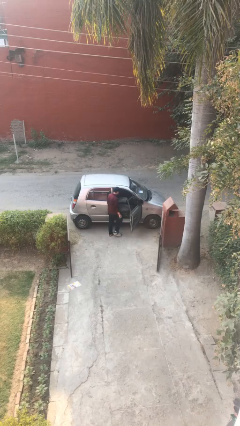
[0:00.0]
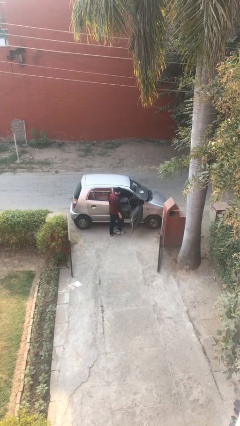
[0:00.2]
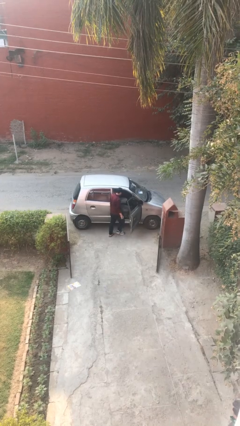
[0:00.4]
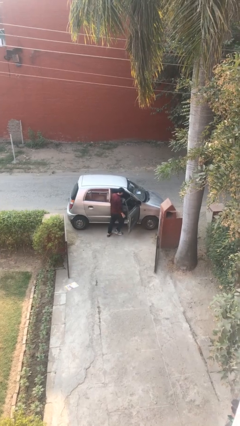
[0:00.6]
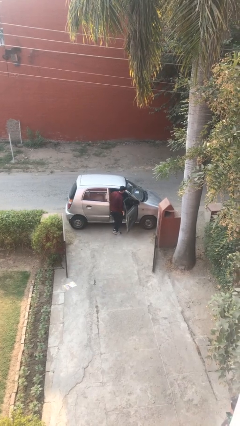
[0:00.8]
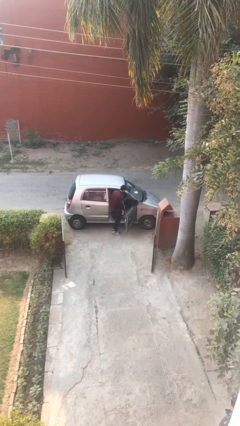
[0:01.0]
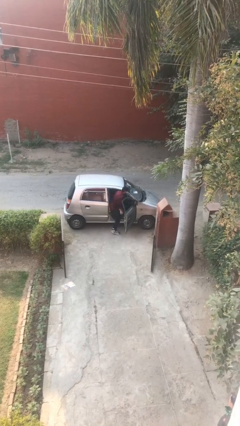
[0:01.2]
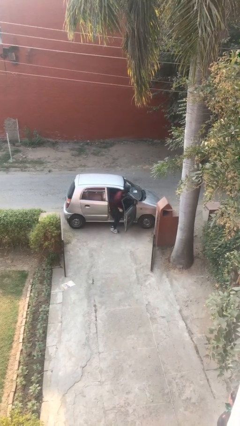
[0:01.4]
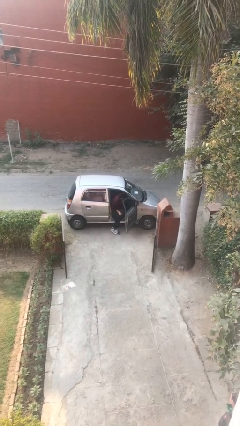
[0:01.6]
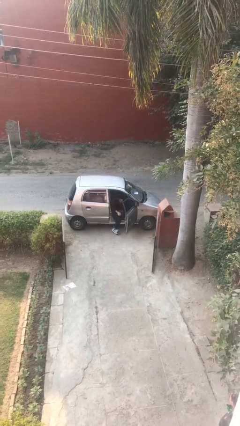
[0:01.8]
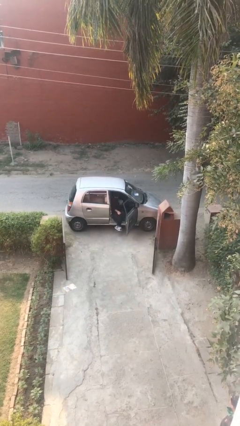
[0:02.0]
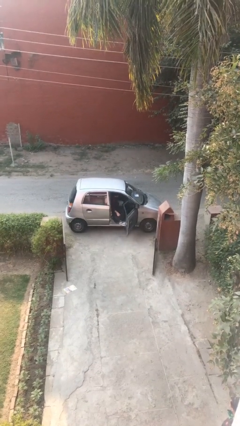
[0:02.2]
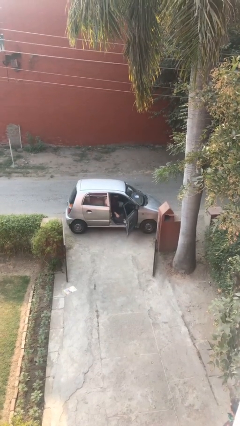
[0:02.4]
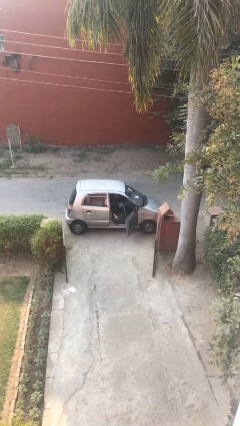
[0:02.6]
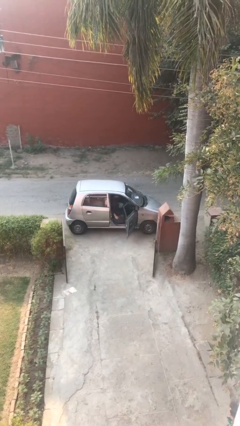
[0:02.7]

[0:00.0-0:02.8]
person enters car

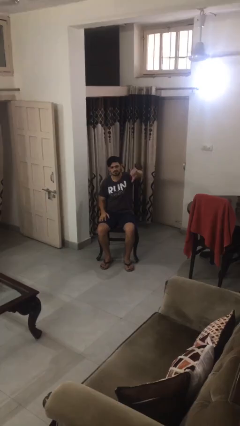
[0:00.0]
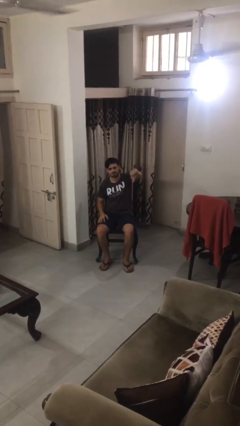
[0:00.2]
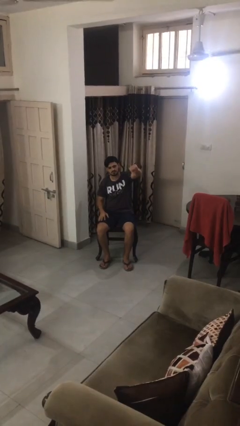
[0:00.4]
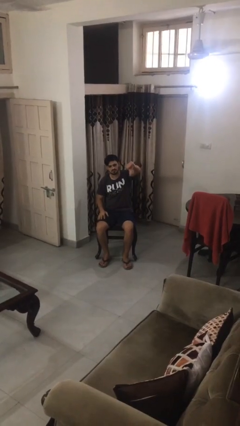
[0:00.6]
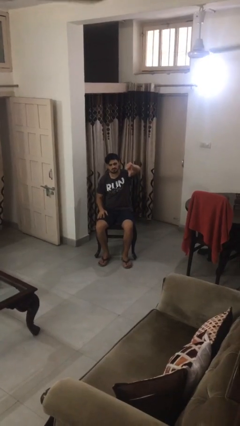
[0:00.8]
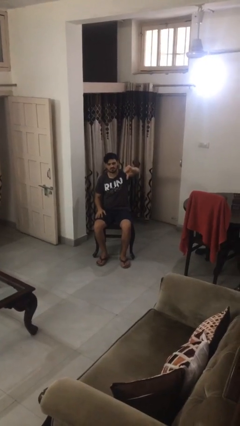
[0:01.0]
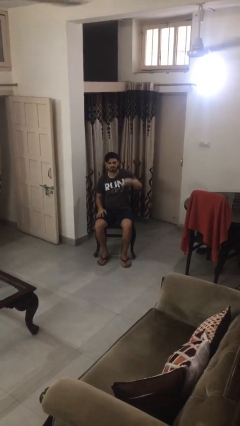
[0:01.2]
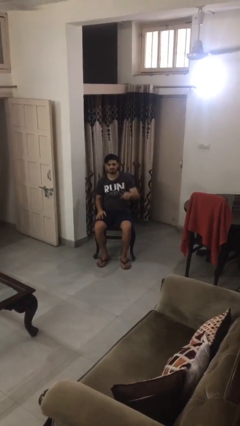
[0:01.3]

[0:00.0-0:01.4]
person gestures thumbs down

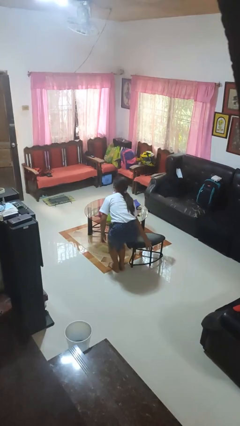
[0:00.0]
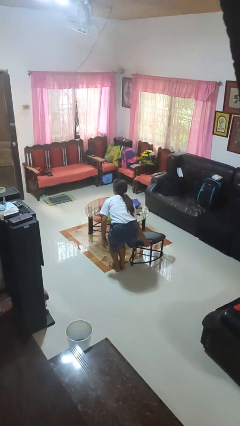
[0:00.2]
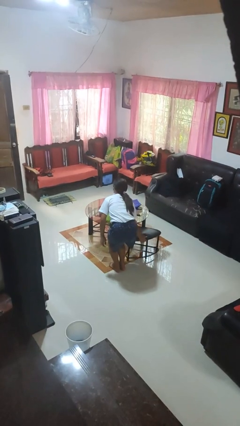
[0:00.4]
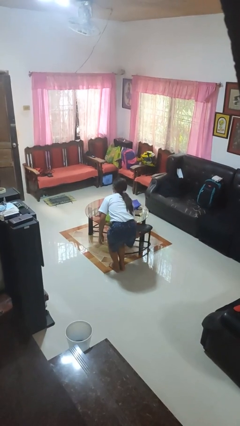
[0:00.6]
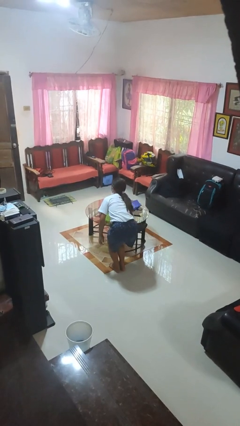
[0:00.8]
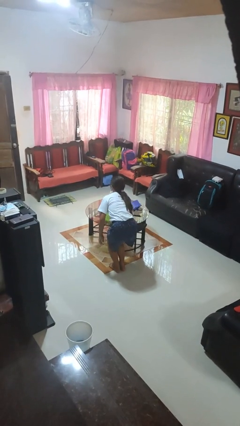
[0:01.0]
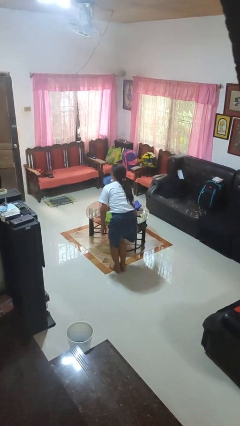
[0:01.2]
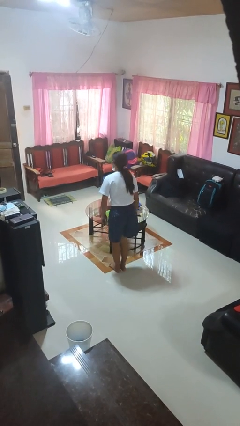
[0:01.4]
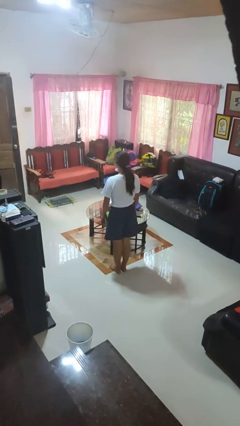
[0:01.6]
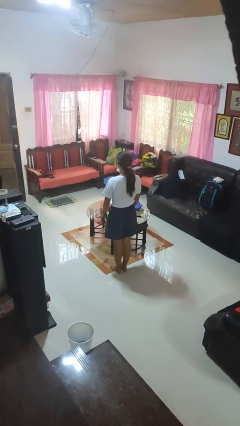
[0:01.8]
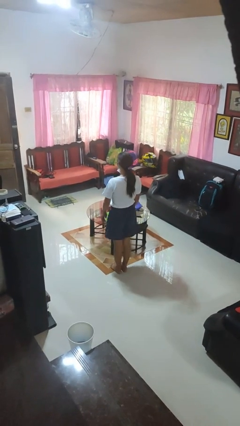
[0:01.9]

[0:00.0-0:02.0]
person pushes in chair

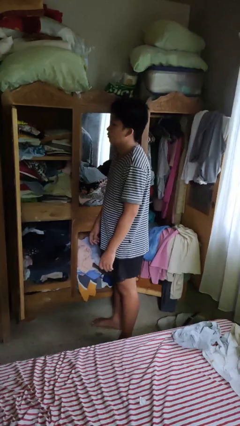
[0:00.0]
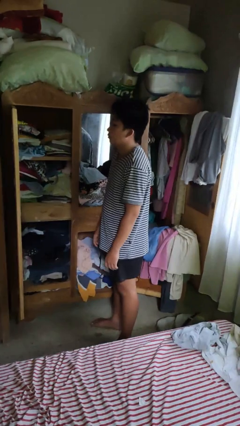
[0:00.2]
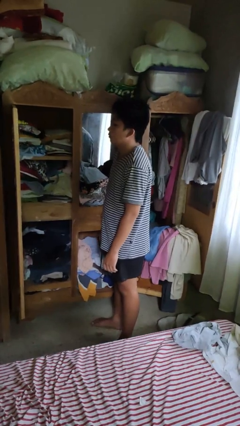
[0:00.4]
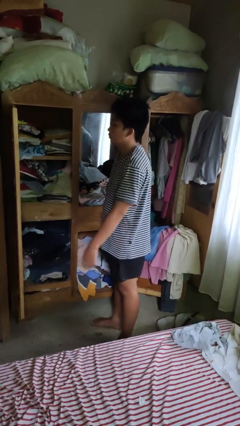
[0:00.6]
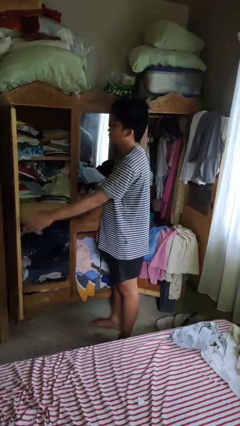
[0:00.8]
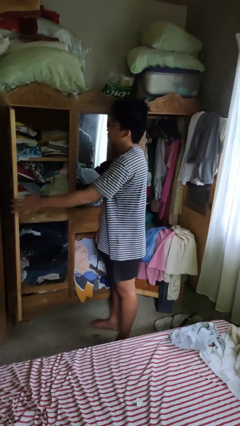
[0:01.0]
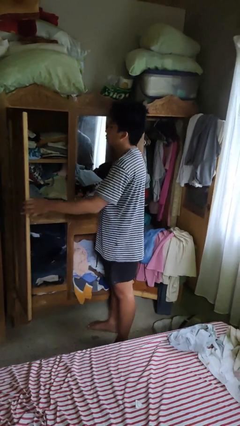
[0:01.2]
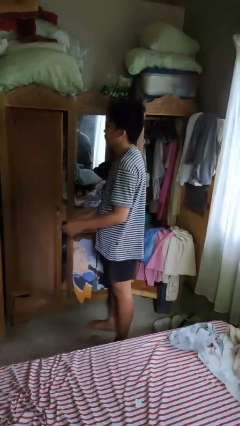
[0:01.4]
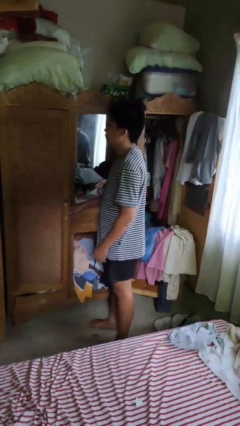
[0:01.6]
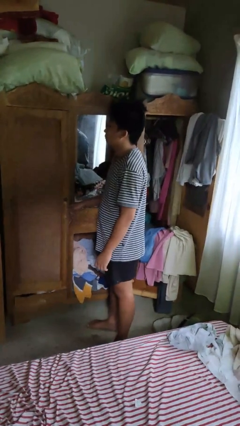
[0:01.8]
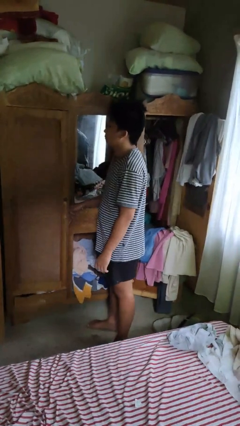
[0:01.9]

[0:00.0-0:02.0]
person closes dresser drawer

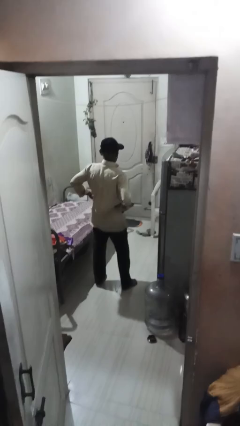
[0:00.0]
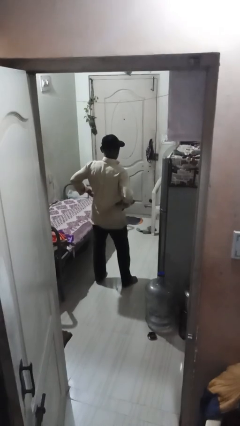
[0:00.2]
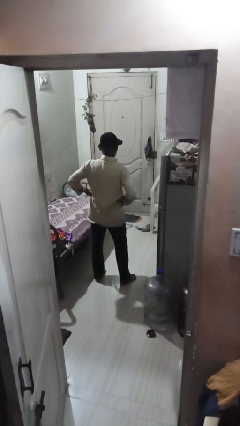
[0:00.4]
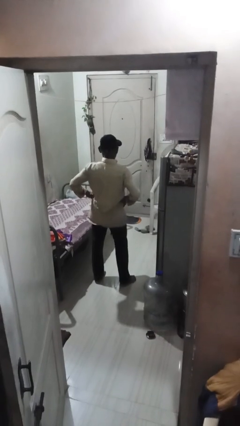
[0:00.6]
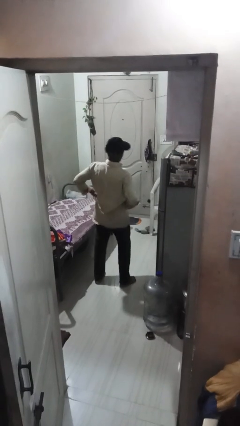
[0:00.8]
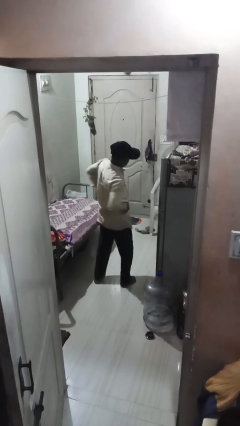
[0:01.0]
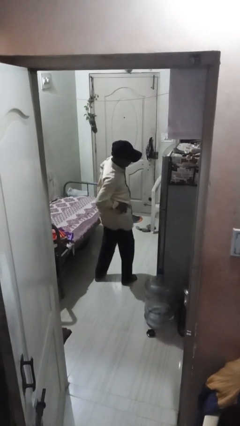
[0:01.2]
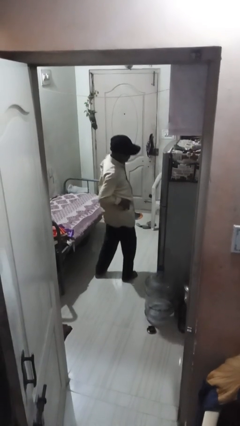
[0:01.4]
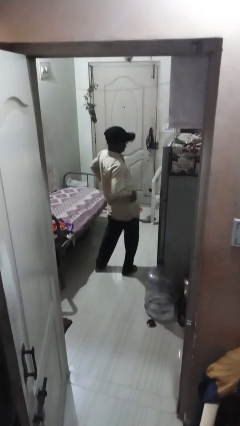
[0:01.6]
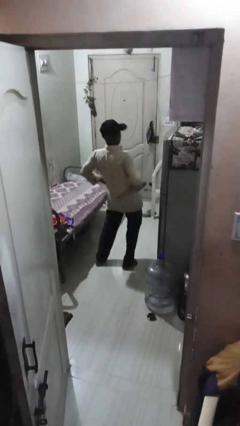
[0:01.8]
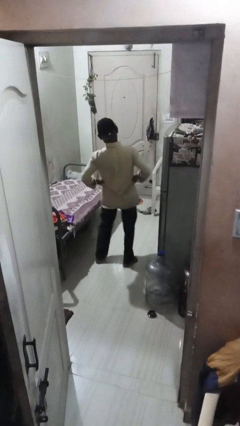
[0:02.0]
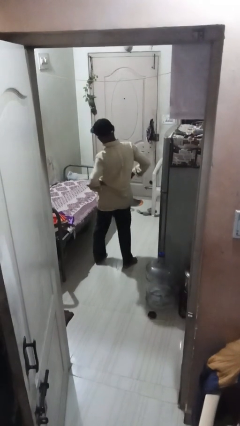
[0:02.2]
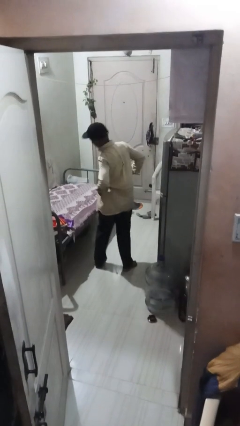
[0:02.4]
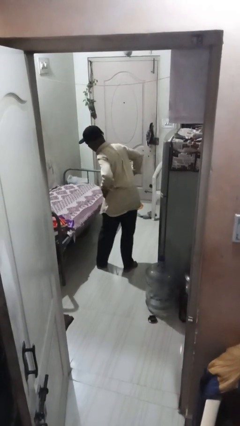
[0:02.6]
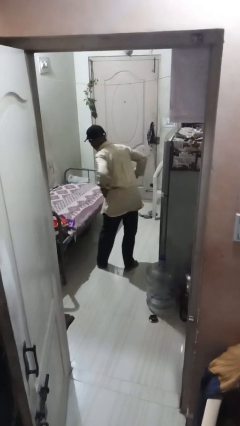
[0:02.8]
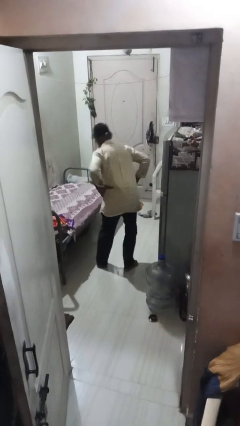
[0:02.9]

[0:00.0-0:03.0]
person wiggles hips

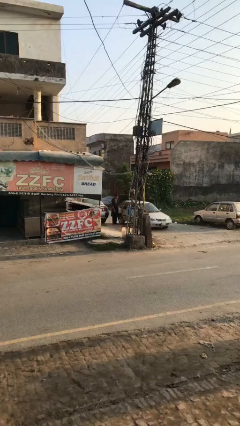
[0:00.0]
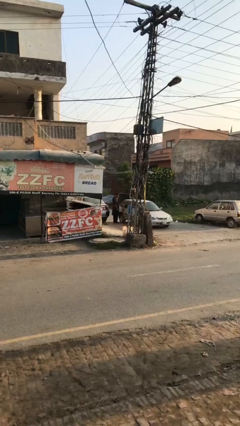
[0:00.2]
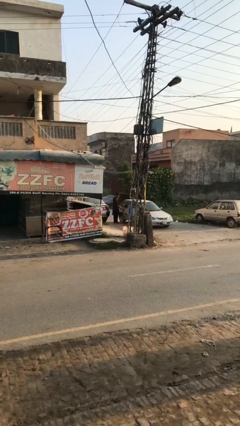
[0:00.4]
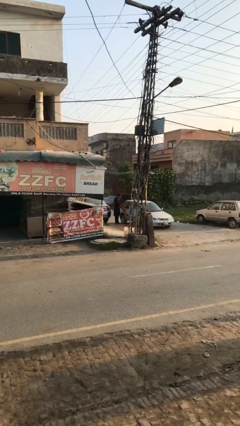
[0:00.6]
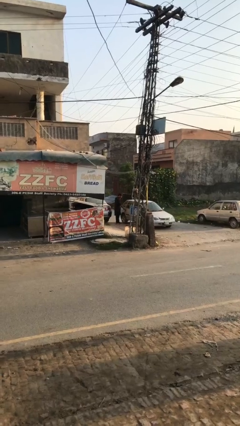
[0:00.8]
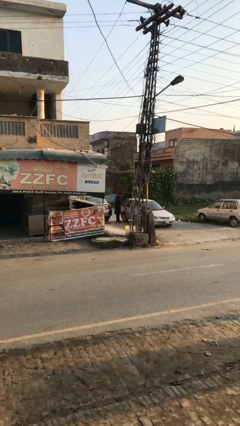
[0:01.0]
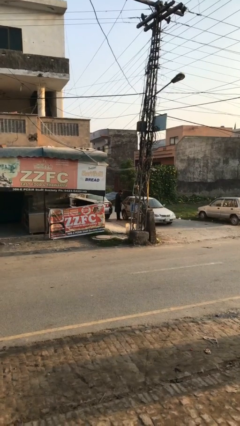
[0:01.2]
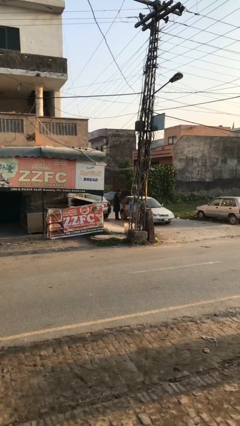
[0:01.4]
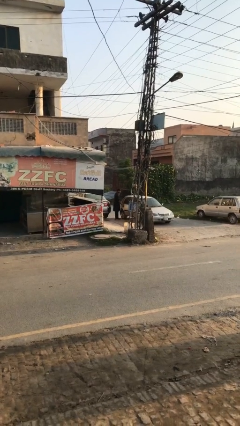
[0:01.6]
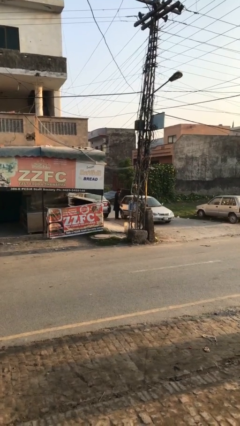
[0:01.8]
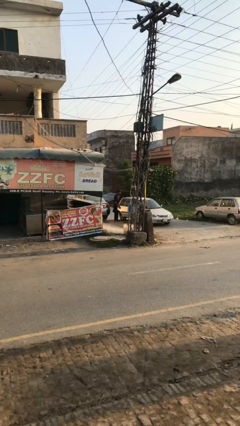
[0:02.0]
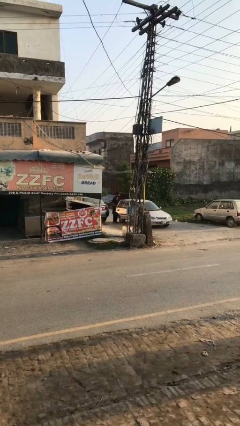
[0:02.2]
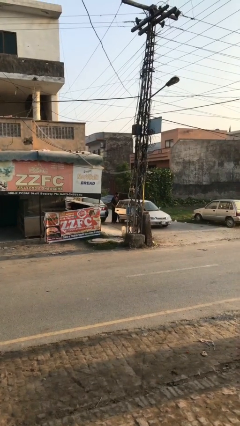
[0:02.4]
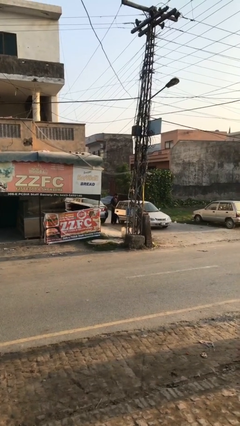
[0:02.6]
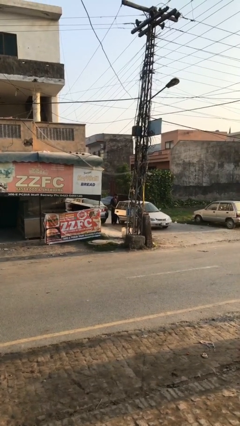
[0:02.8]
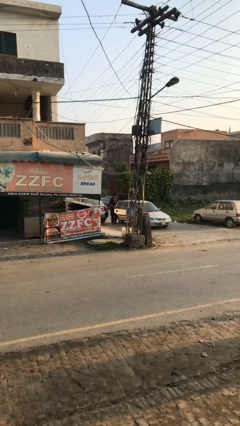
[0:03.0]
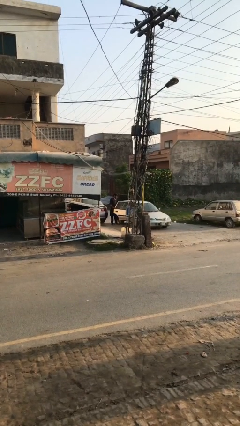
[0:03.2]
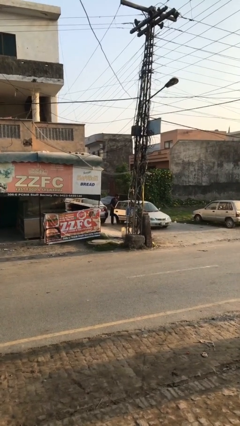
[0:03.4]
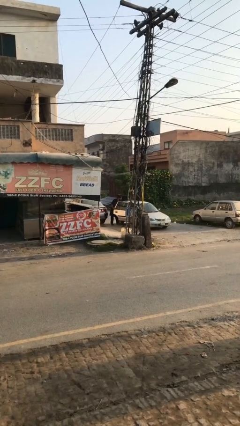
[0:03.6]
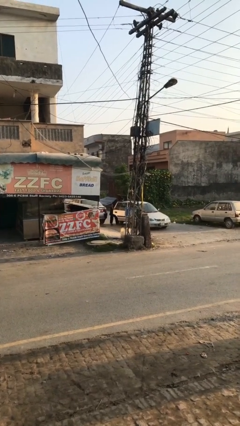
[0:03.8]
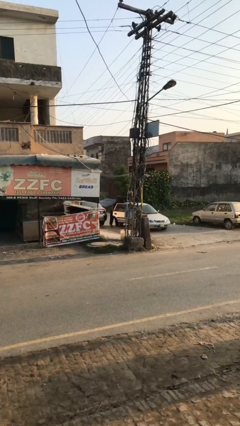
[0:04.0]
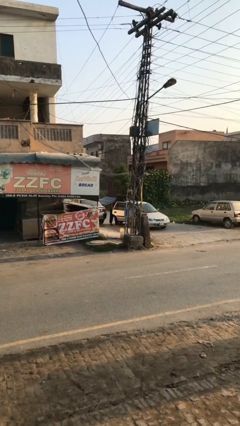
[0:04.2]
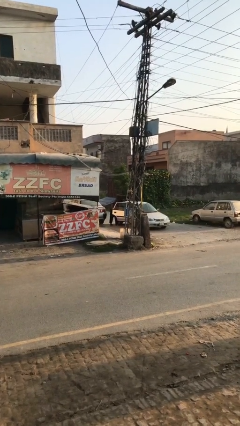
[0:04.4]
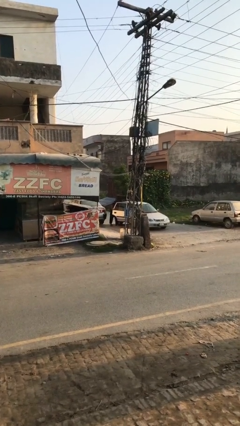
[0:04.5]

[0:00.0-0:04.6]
person opens car door

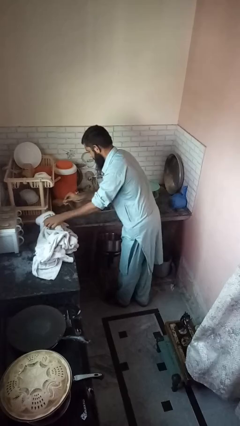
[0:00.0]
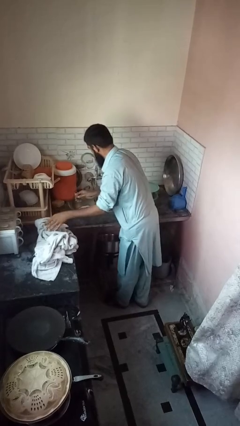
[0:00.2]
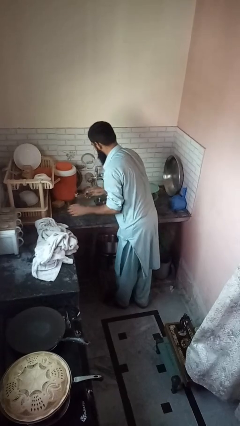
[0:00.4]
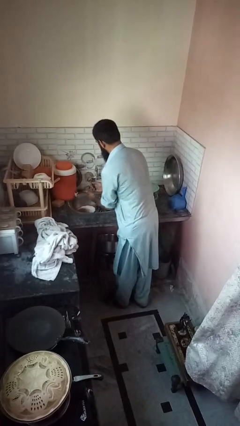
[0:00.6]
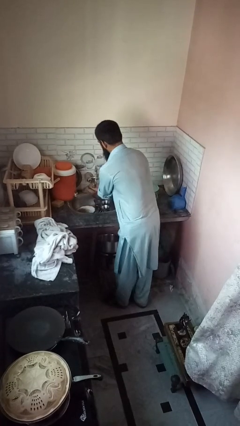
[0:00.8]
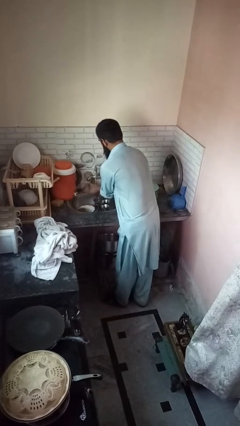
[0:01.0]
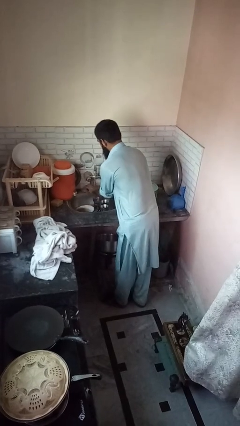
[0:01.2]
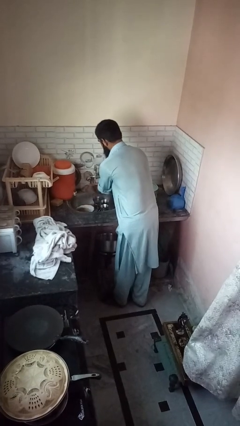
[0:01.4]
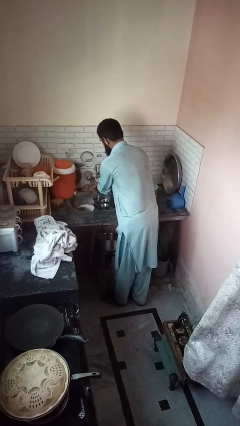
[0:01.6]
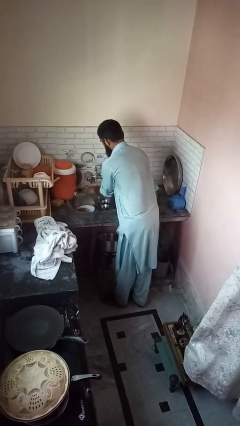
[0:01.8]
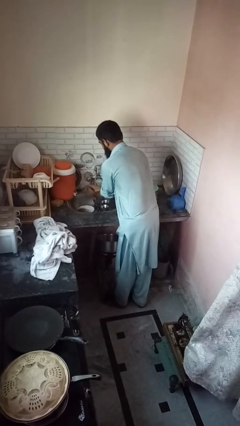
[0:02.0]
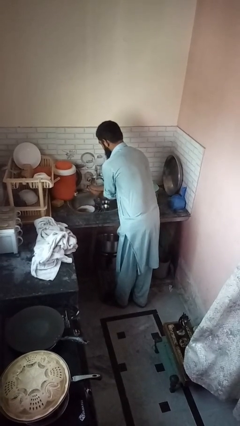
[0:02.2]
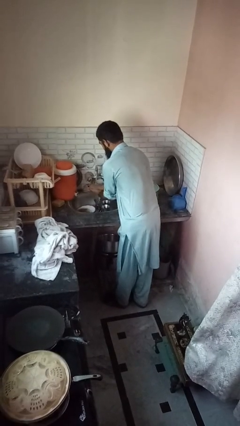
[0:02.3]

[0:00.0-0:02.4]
person washes hands
